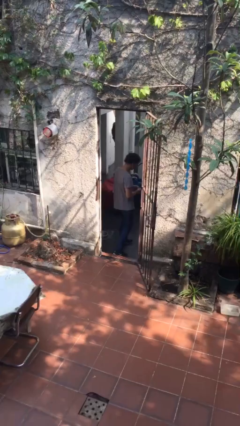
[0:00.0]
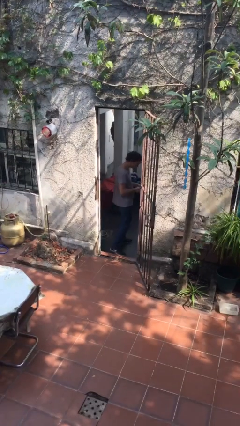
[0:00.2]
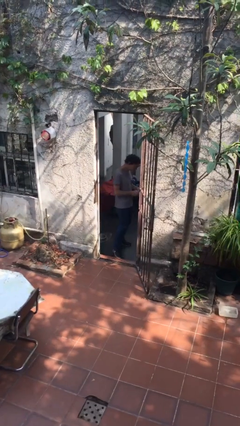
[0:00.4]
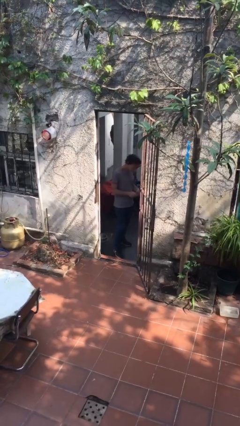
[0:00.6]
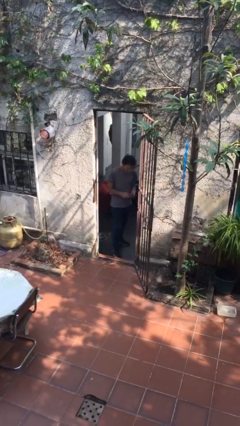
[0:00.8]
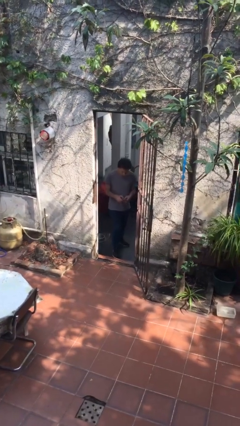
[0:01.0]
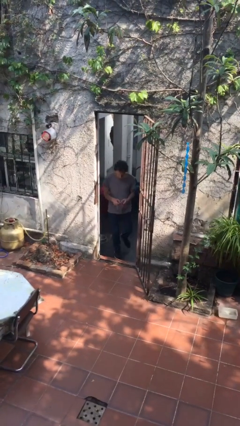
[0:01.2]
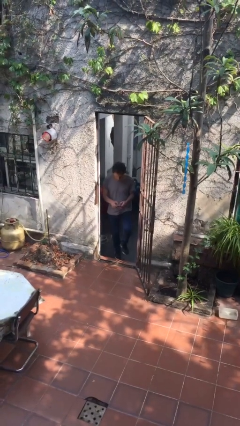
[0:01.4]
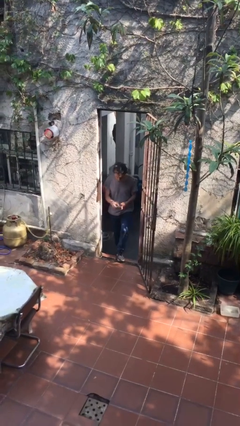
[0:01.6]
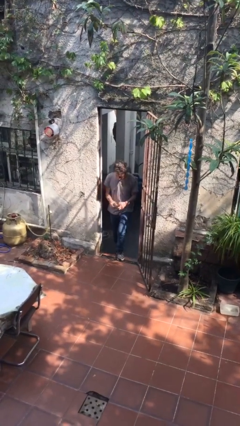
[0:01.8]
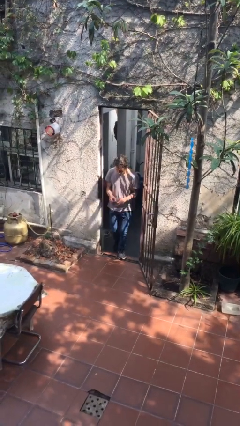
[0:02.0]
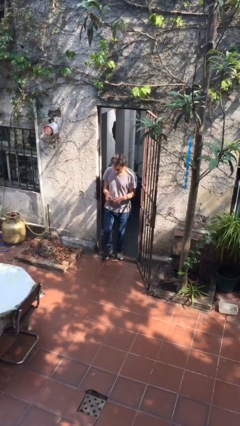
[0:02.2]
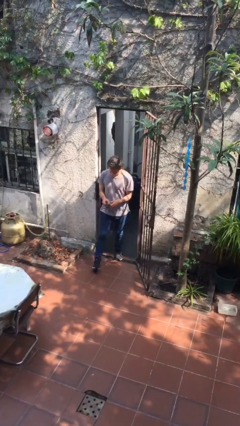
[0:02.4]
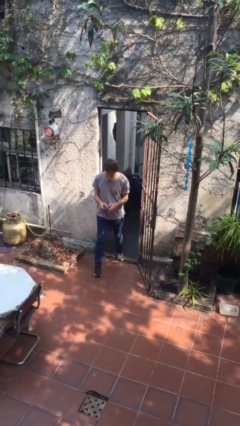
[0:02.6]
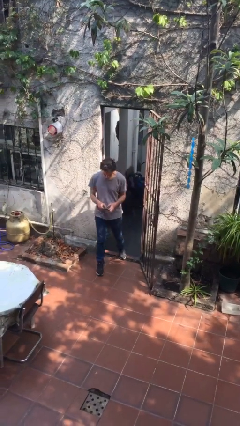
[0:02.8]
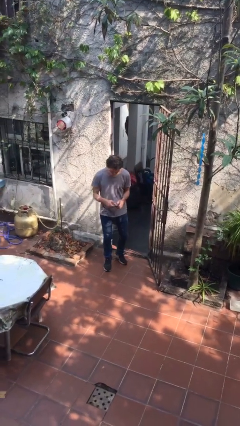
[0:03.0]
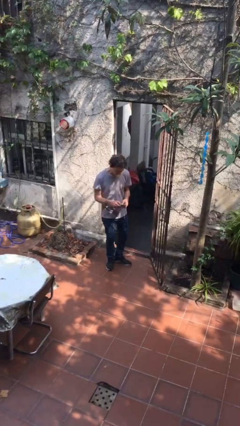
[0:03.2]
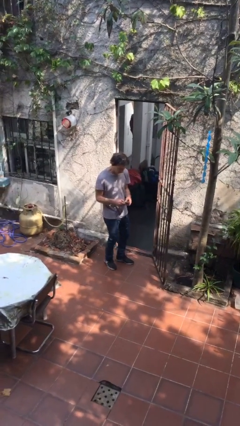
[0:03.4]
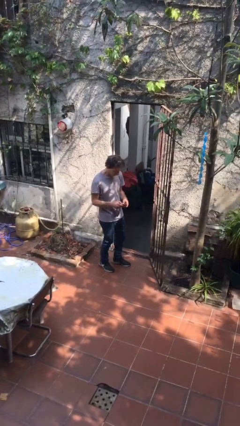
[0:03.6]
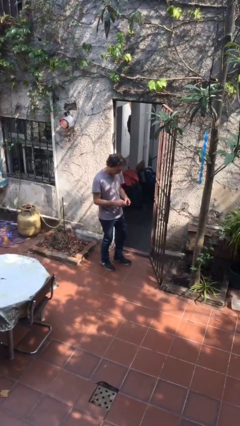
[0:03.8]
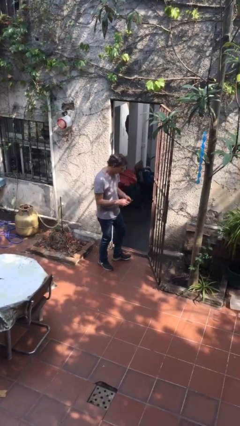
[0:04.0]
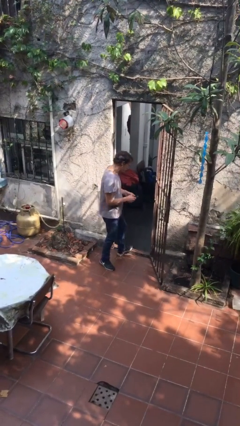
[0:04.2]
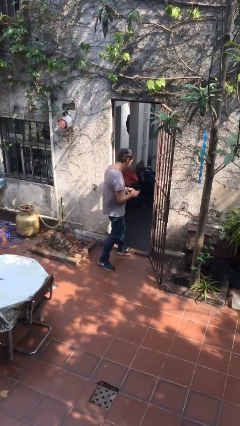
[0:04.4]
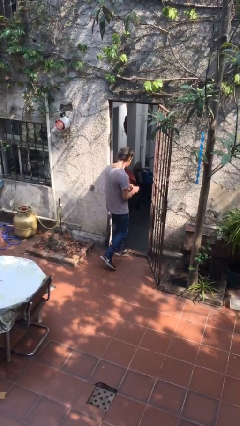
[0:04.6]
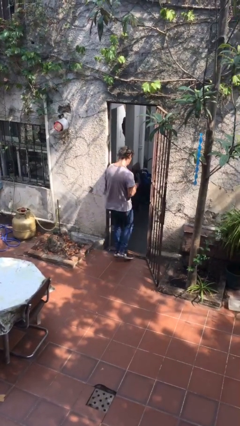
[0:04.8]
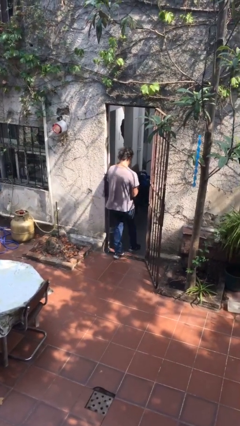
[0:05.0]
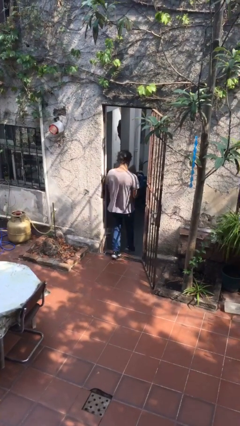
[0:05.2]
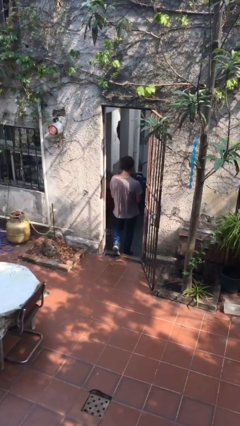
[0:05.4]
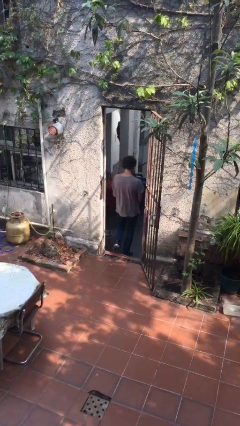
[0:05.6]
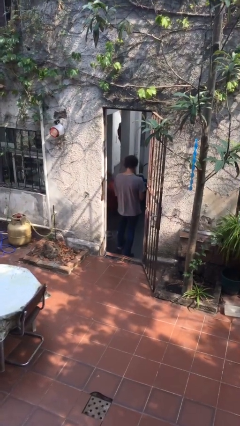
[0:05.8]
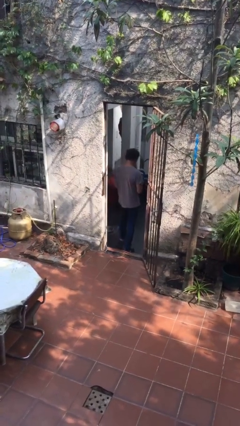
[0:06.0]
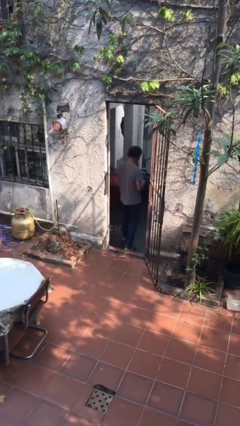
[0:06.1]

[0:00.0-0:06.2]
person enters scene through structure

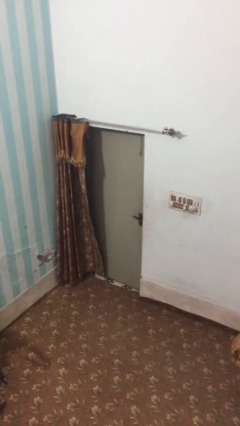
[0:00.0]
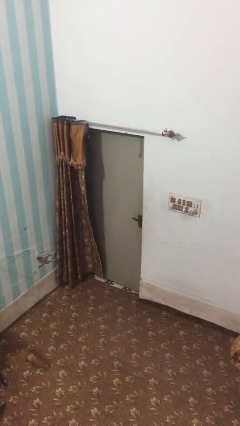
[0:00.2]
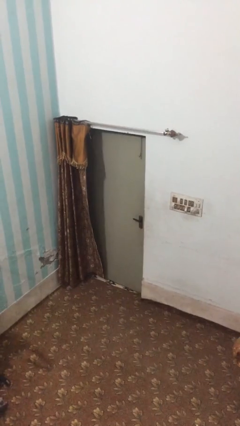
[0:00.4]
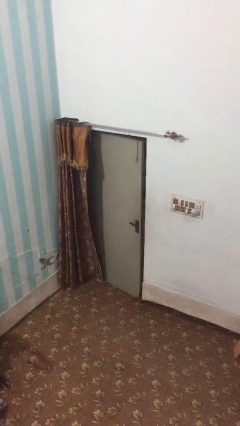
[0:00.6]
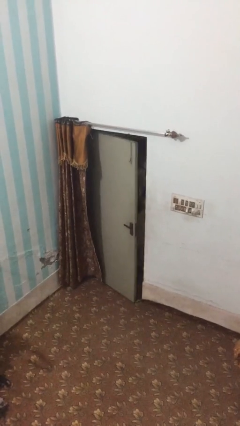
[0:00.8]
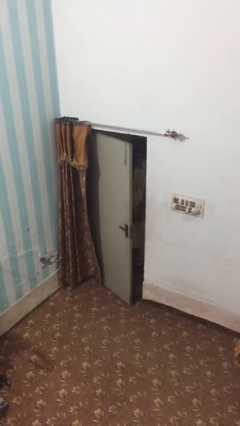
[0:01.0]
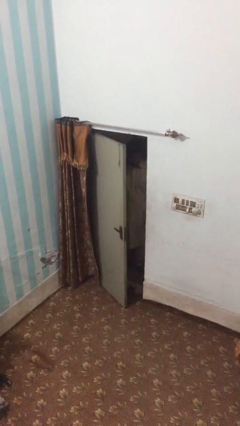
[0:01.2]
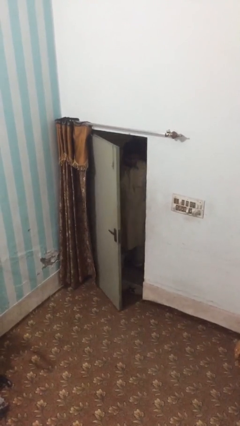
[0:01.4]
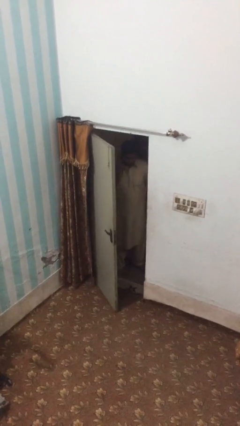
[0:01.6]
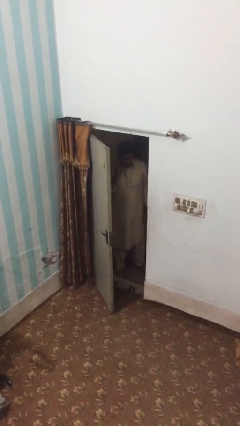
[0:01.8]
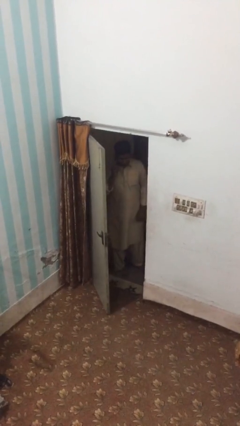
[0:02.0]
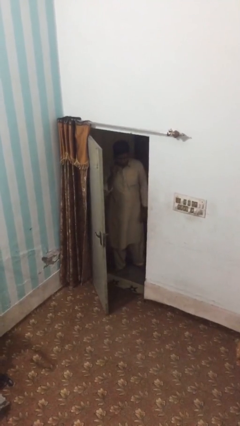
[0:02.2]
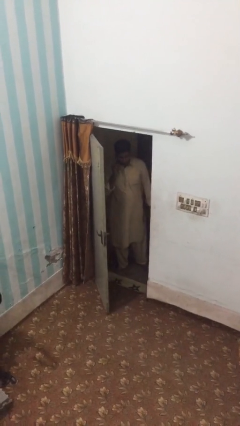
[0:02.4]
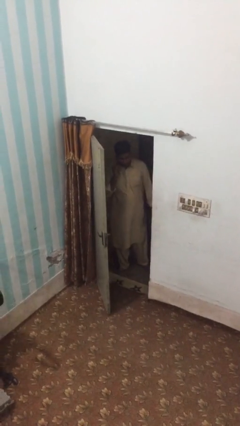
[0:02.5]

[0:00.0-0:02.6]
person opens facility door

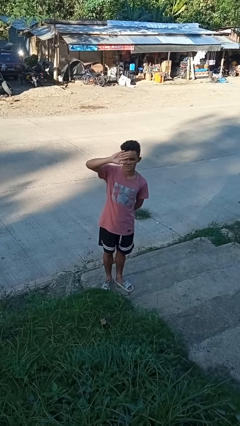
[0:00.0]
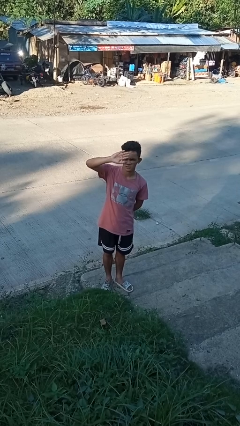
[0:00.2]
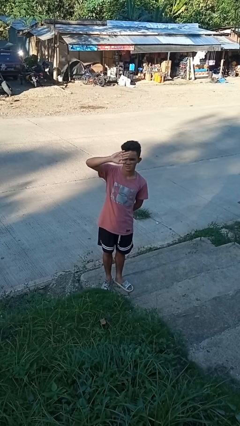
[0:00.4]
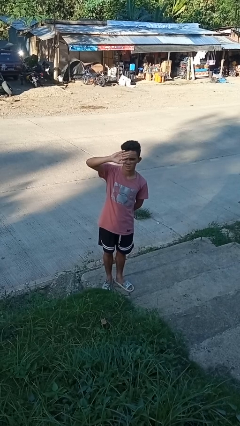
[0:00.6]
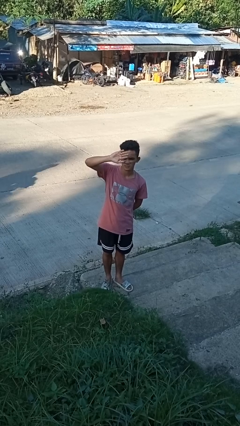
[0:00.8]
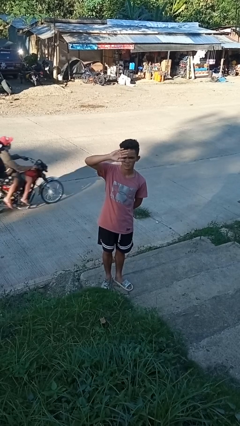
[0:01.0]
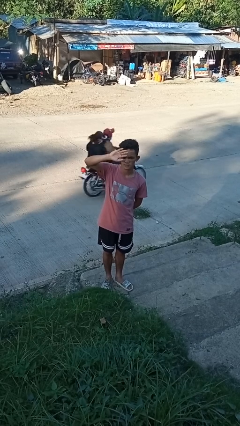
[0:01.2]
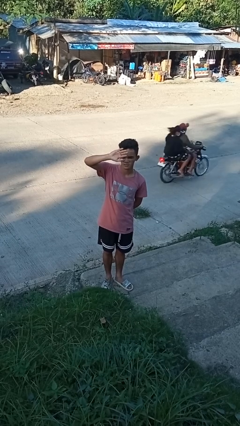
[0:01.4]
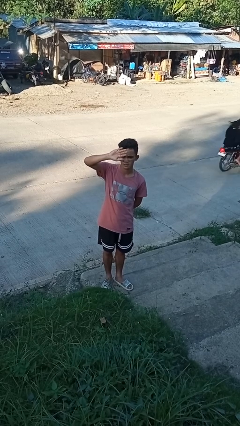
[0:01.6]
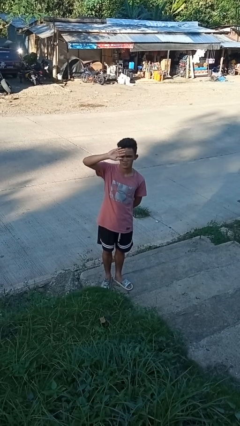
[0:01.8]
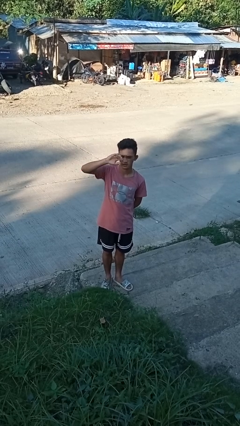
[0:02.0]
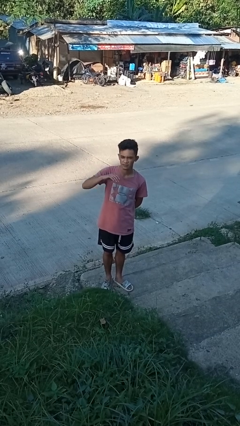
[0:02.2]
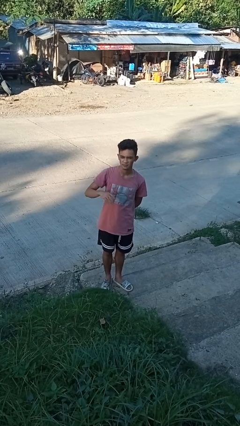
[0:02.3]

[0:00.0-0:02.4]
person shades eyes

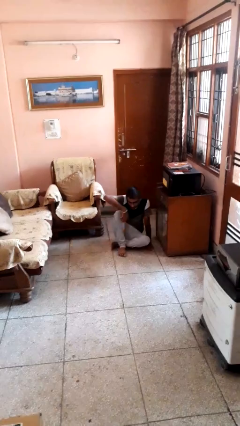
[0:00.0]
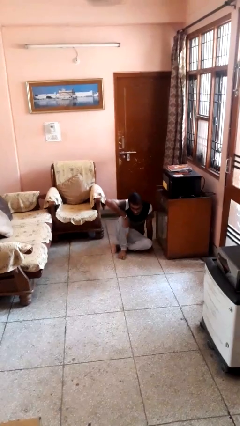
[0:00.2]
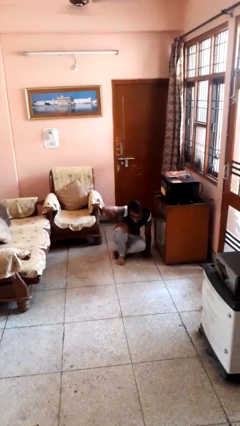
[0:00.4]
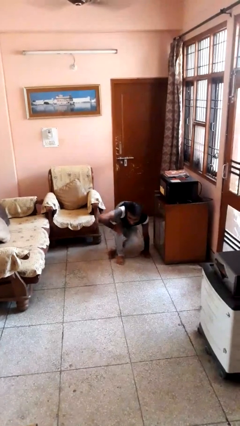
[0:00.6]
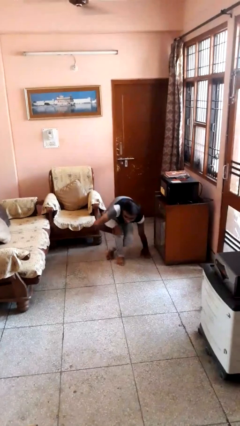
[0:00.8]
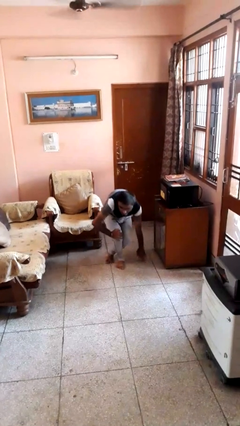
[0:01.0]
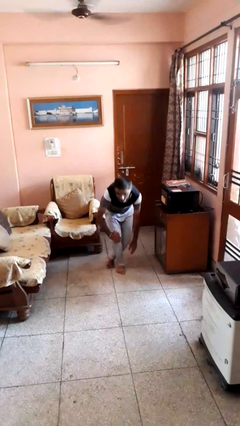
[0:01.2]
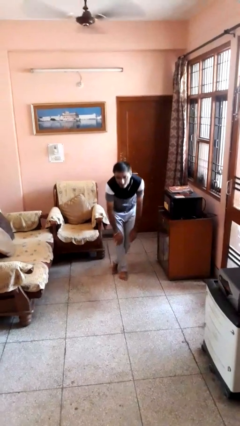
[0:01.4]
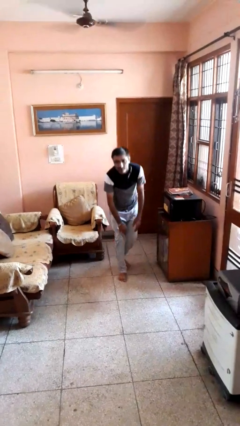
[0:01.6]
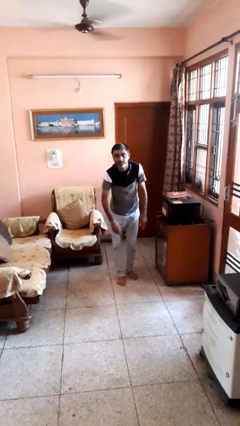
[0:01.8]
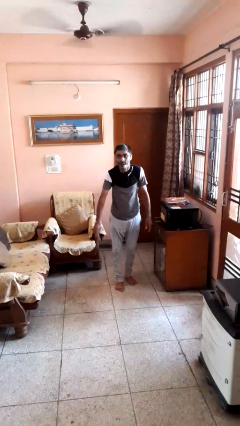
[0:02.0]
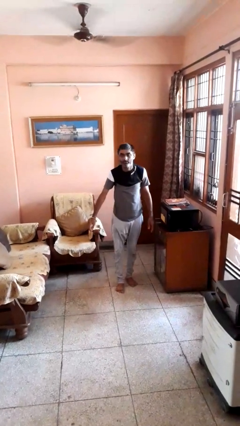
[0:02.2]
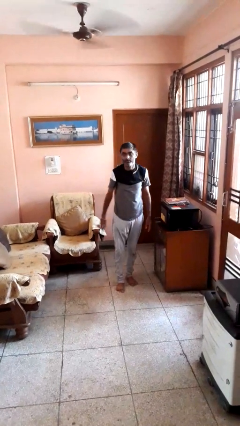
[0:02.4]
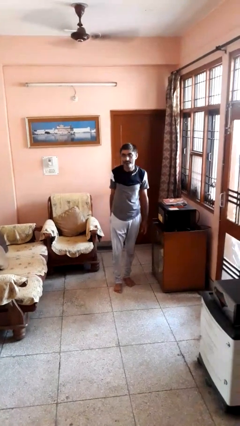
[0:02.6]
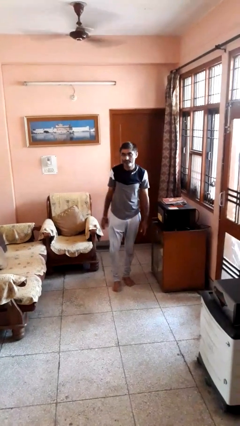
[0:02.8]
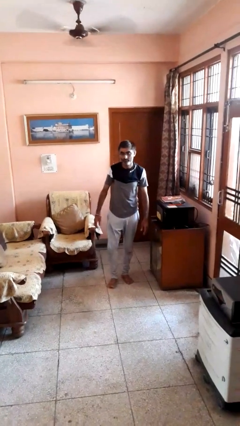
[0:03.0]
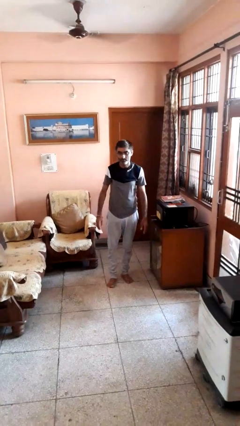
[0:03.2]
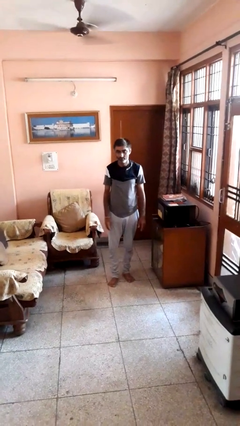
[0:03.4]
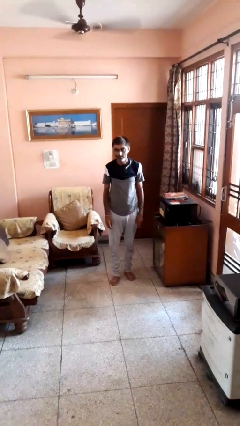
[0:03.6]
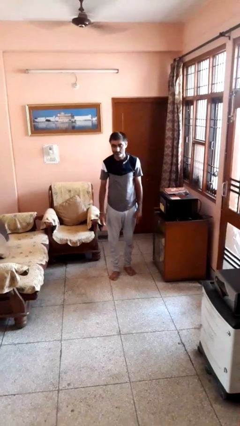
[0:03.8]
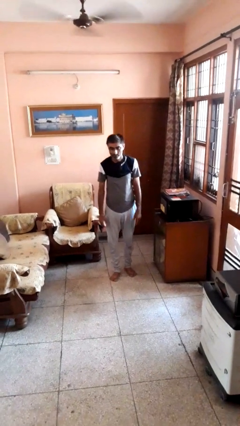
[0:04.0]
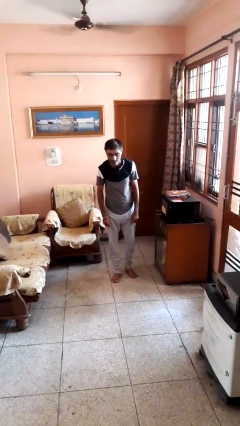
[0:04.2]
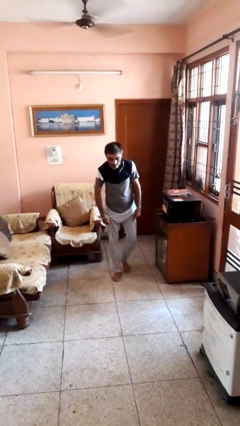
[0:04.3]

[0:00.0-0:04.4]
person stands up from floor

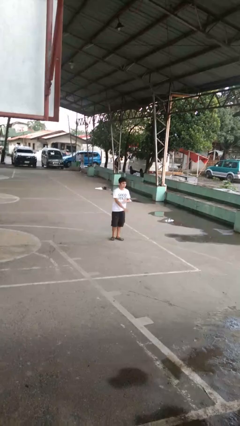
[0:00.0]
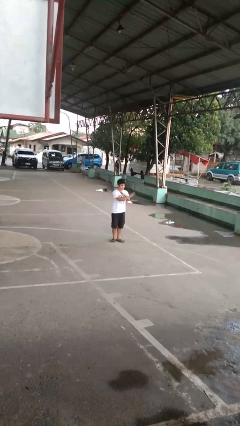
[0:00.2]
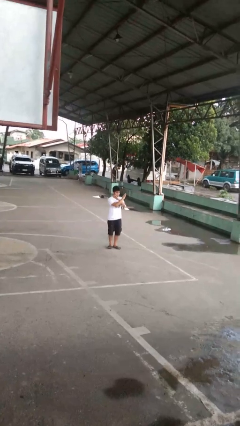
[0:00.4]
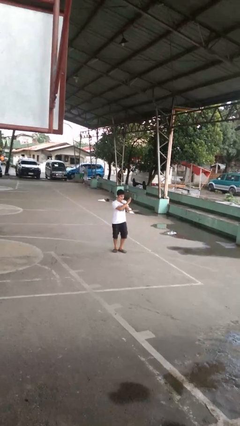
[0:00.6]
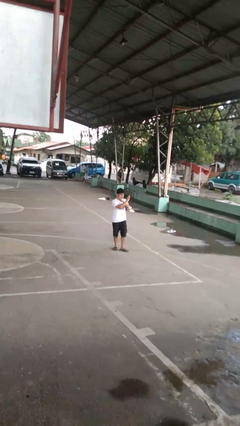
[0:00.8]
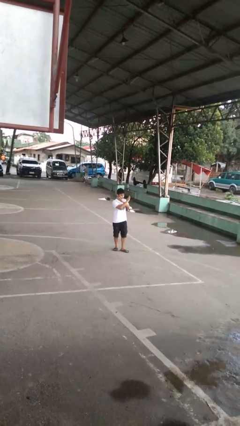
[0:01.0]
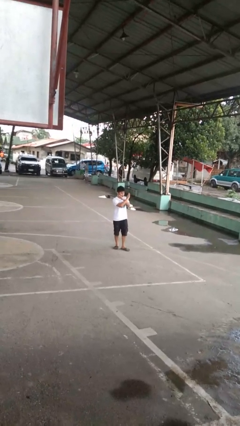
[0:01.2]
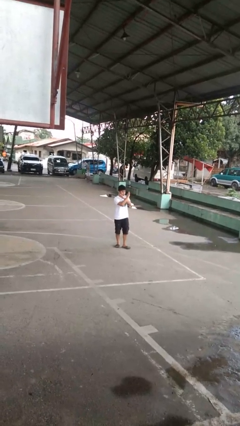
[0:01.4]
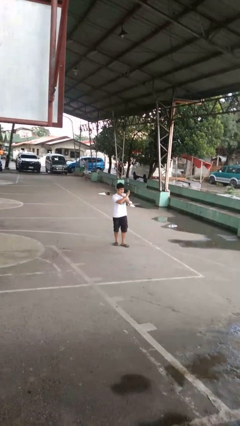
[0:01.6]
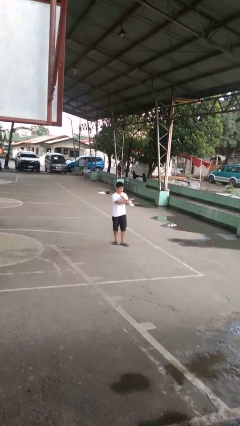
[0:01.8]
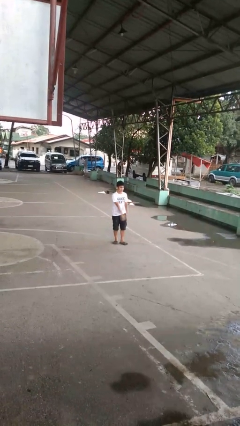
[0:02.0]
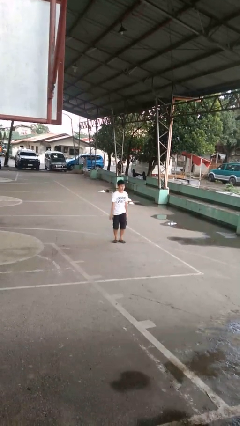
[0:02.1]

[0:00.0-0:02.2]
person gestures arms x
